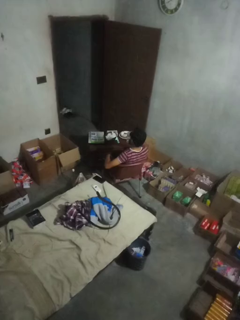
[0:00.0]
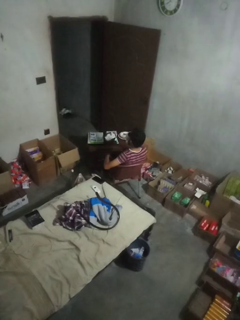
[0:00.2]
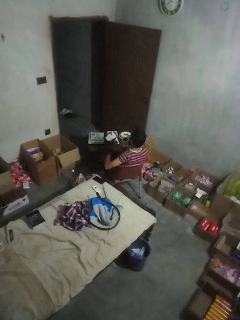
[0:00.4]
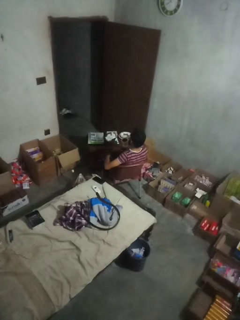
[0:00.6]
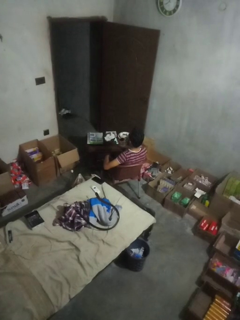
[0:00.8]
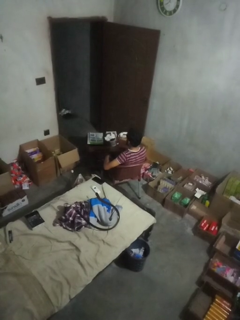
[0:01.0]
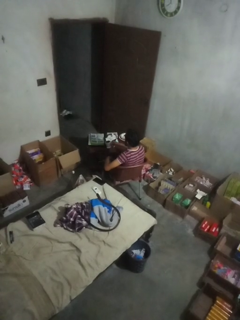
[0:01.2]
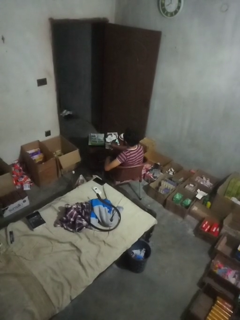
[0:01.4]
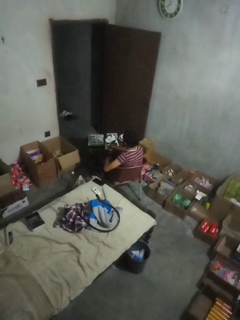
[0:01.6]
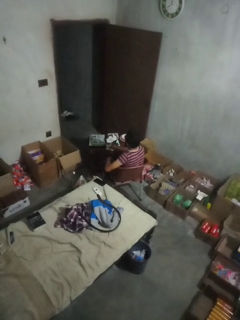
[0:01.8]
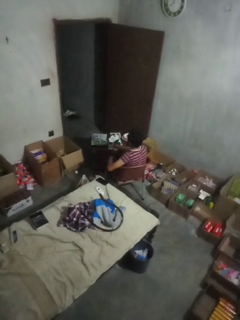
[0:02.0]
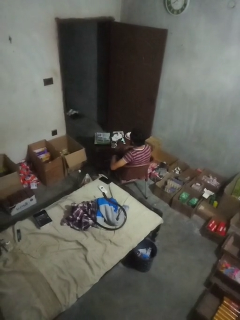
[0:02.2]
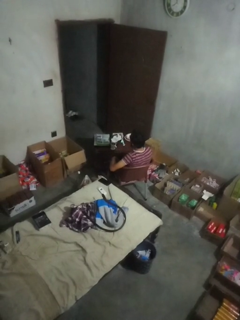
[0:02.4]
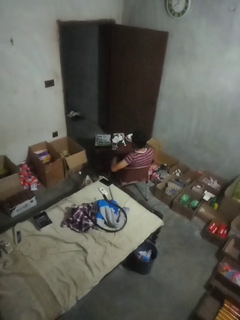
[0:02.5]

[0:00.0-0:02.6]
person puts down object on table

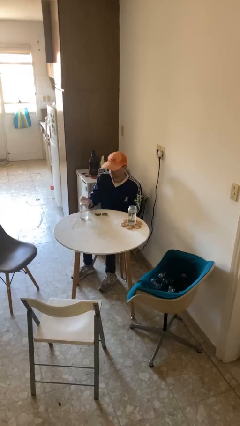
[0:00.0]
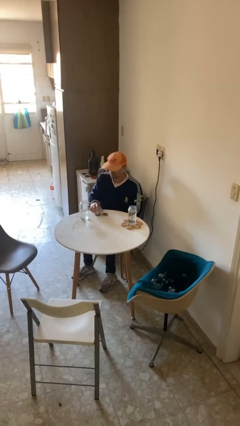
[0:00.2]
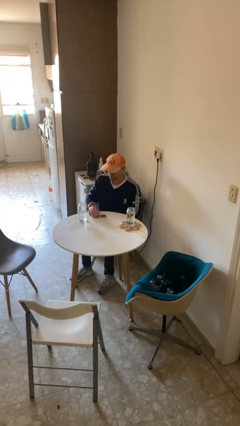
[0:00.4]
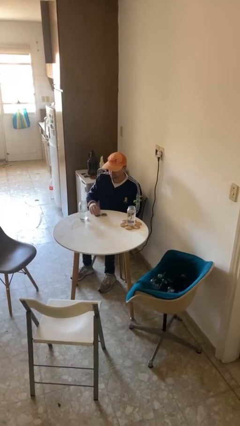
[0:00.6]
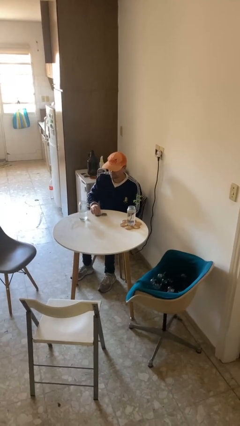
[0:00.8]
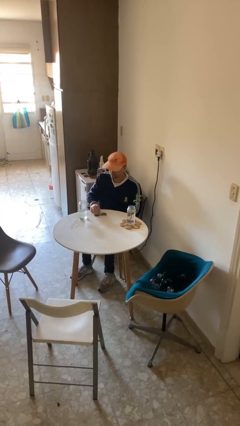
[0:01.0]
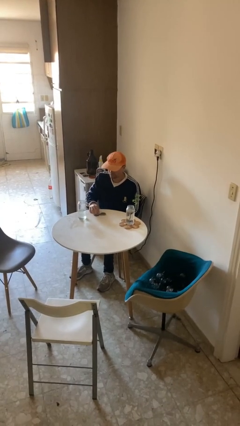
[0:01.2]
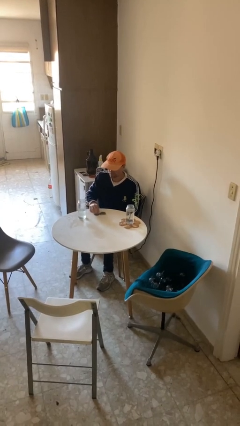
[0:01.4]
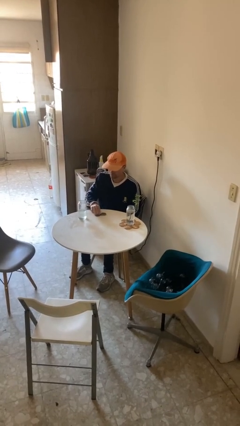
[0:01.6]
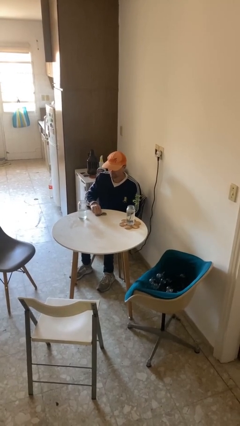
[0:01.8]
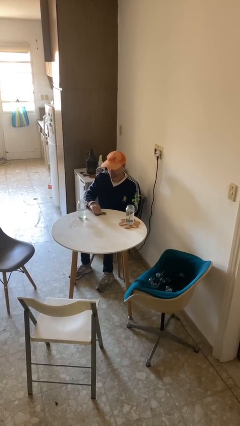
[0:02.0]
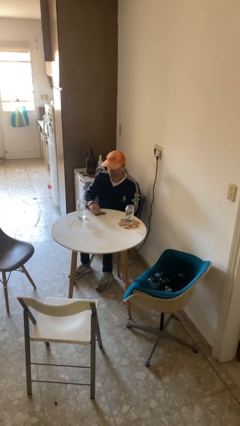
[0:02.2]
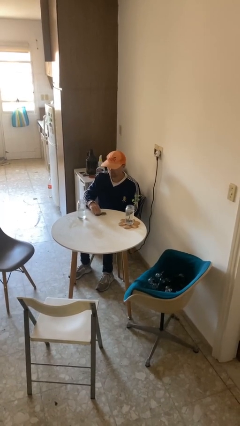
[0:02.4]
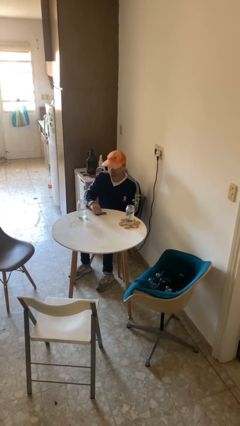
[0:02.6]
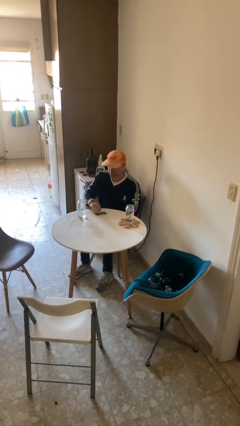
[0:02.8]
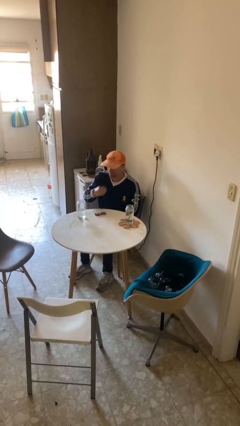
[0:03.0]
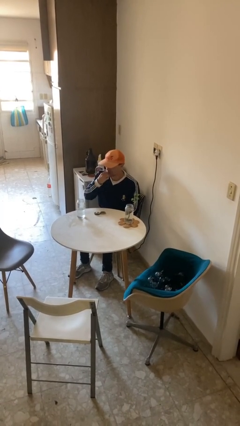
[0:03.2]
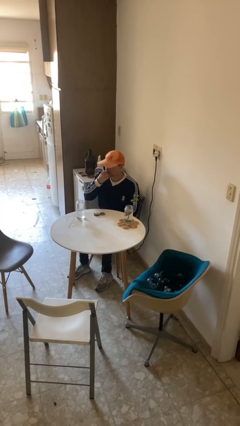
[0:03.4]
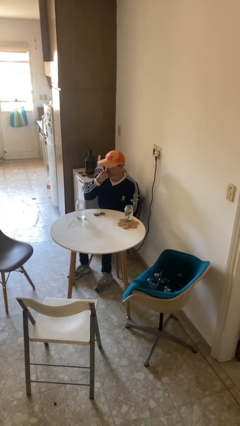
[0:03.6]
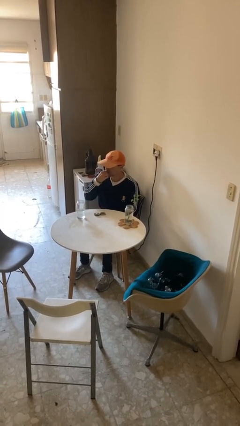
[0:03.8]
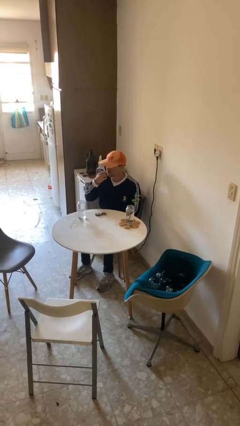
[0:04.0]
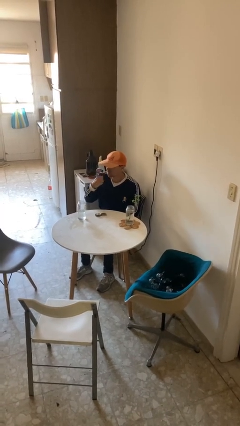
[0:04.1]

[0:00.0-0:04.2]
person takes medicine pills

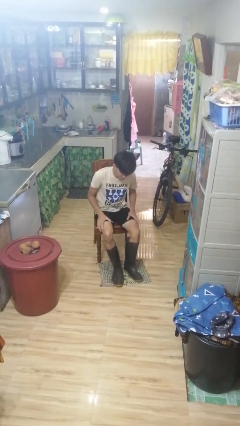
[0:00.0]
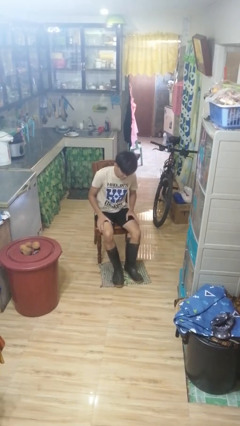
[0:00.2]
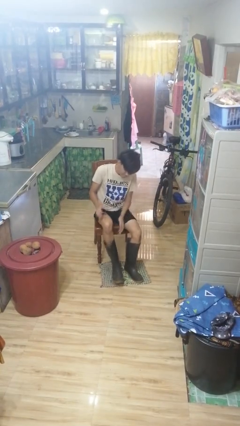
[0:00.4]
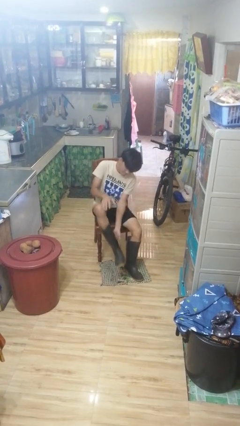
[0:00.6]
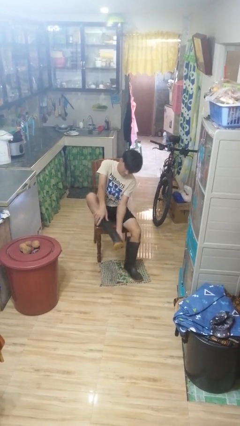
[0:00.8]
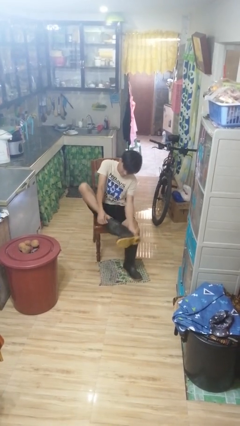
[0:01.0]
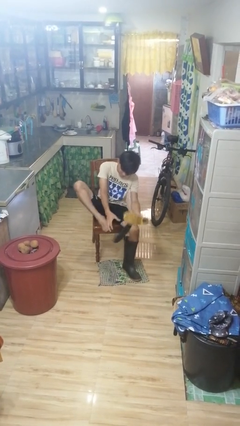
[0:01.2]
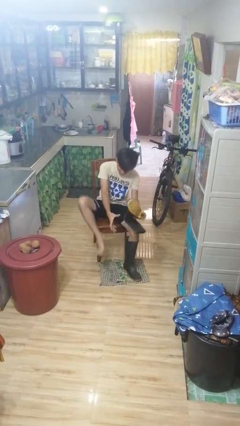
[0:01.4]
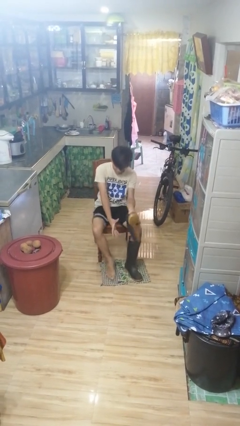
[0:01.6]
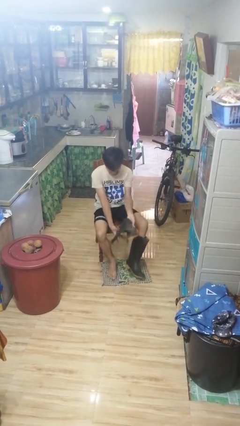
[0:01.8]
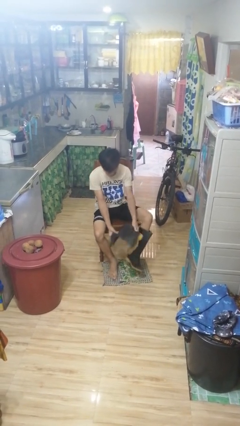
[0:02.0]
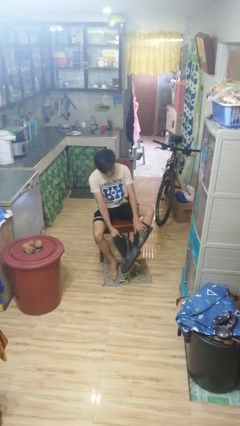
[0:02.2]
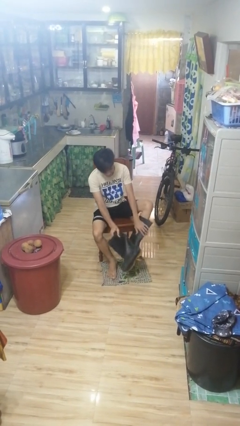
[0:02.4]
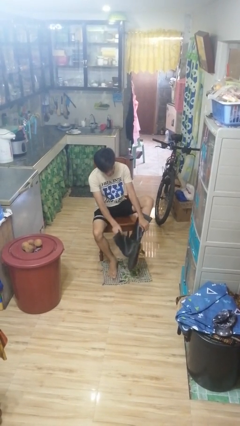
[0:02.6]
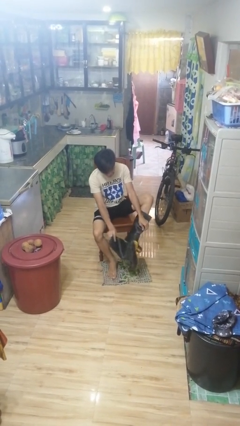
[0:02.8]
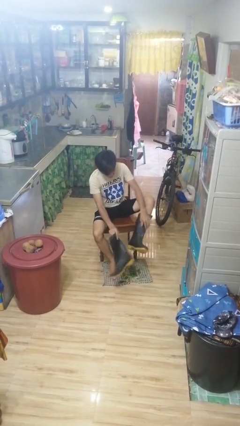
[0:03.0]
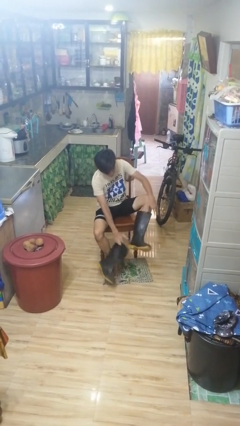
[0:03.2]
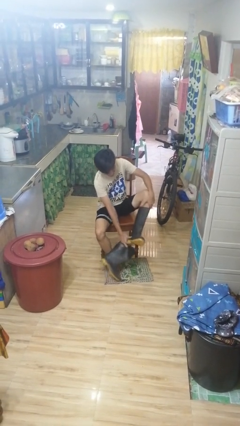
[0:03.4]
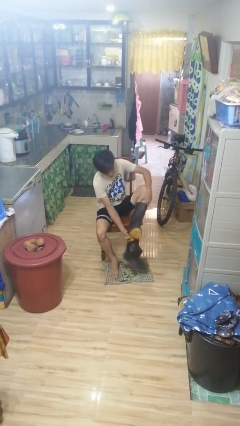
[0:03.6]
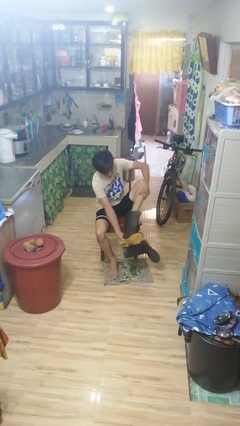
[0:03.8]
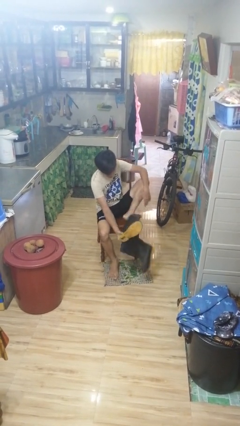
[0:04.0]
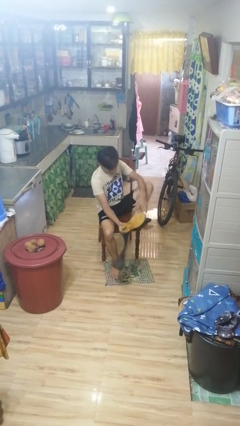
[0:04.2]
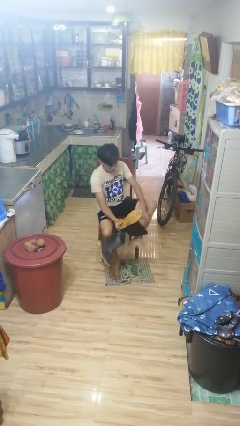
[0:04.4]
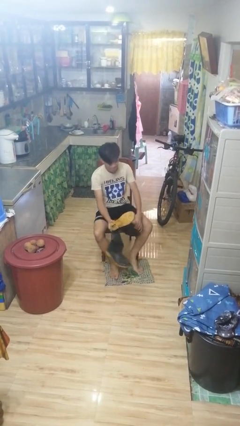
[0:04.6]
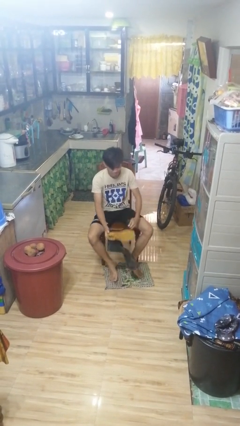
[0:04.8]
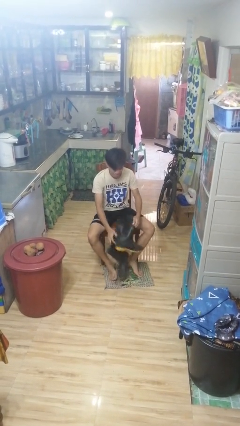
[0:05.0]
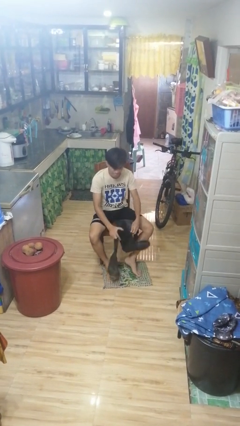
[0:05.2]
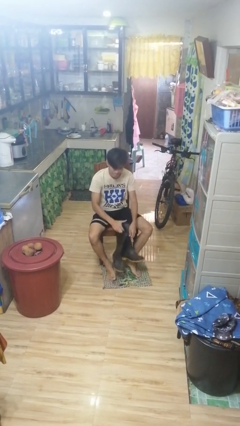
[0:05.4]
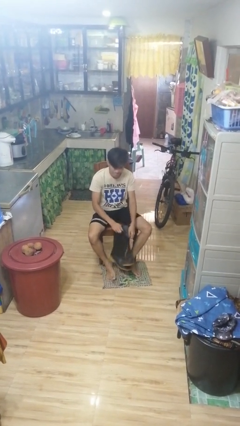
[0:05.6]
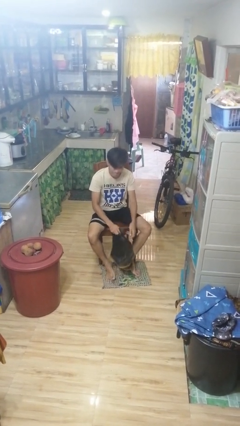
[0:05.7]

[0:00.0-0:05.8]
person takes off boots

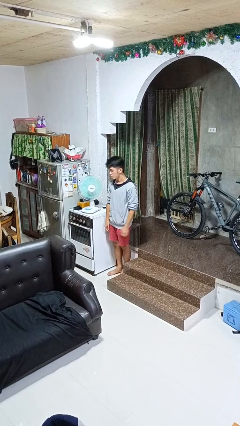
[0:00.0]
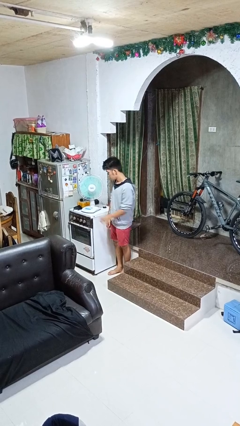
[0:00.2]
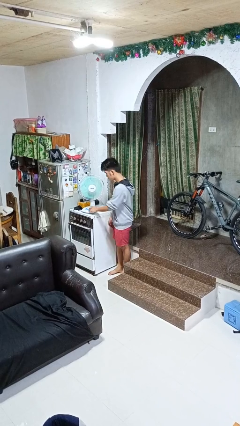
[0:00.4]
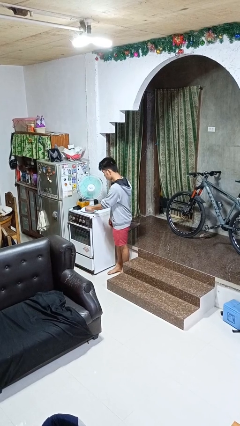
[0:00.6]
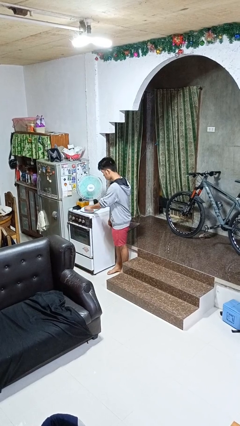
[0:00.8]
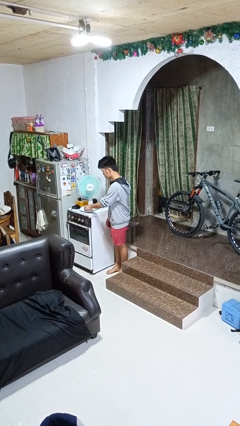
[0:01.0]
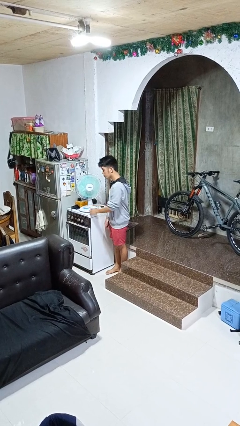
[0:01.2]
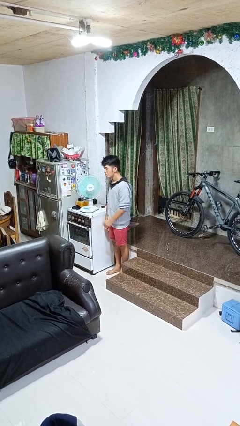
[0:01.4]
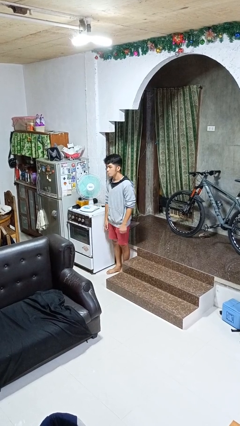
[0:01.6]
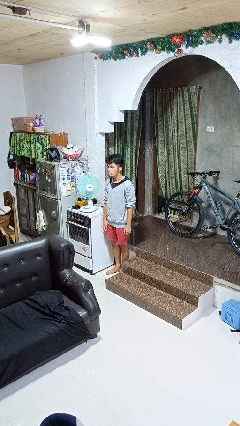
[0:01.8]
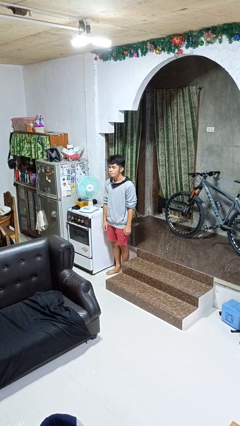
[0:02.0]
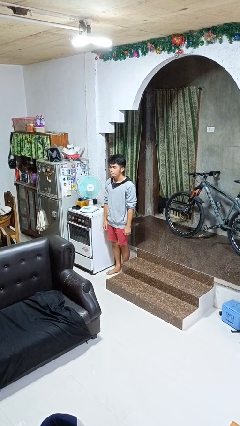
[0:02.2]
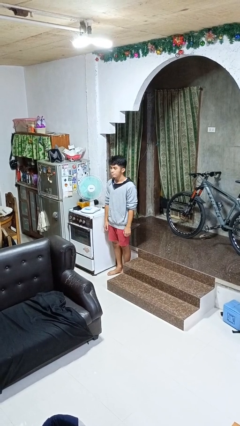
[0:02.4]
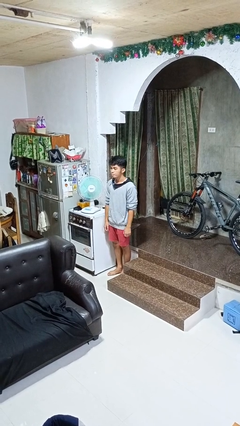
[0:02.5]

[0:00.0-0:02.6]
person turns on fan

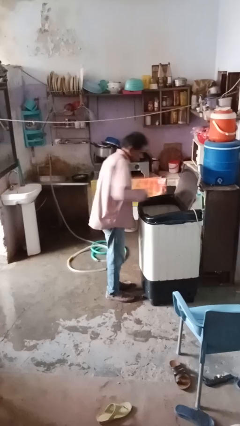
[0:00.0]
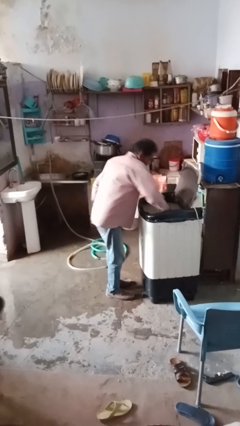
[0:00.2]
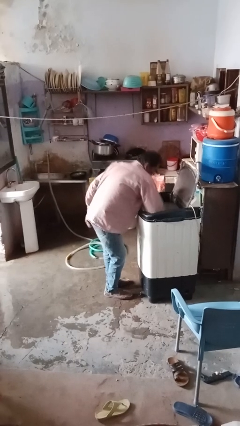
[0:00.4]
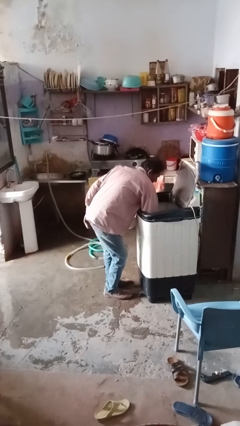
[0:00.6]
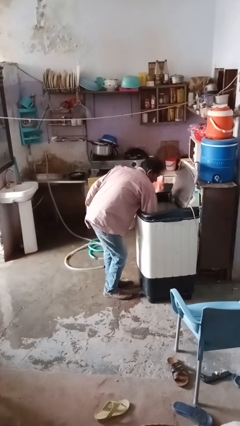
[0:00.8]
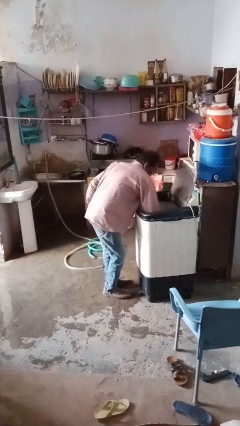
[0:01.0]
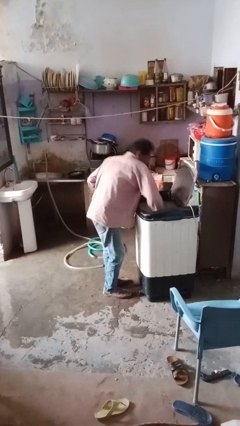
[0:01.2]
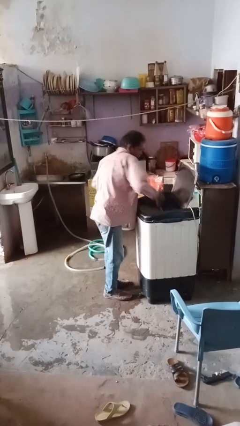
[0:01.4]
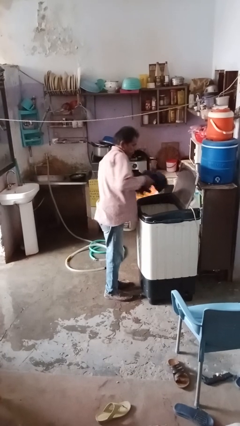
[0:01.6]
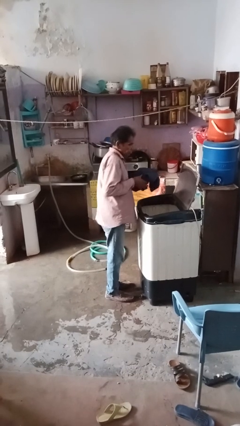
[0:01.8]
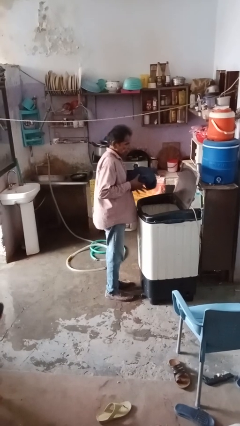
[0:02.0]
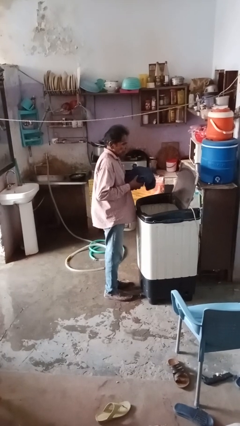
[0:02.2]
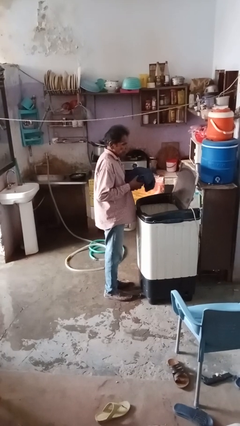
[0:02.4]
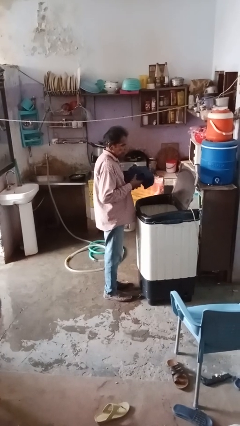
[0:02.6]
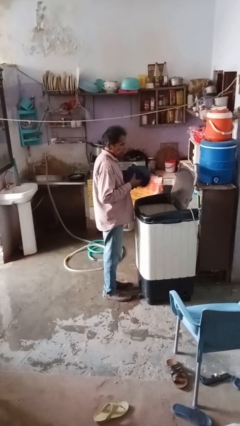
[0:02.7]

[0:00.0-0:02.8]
person unloads clotheswasher
